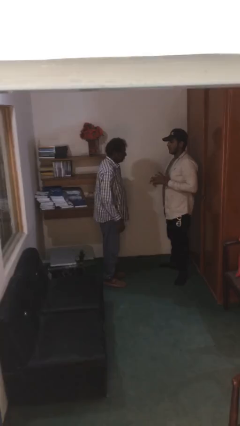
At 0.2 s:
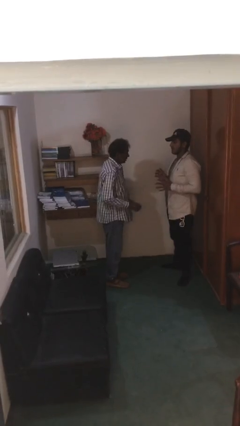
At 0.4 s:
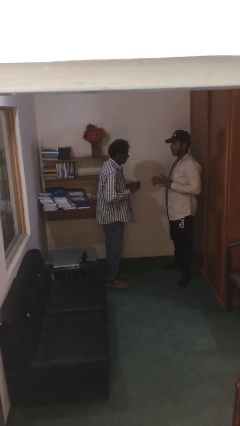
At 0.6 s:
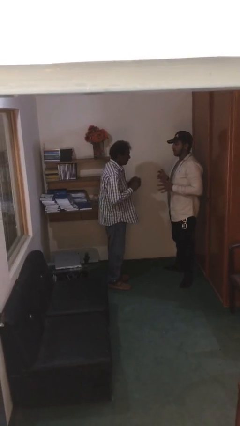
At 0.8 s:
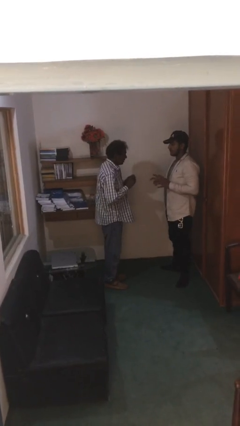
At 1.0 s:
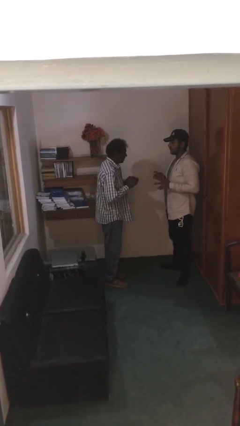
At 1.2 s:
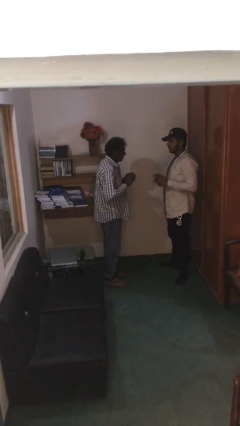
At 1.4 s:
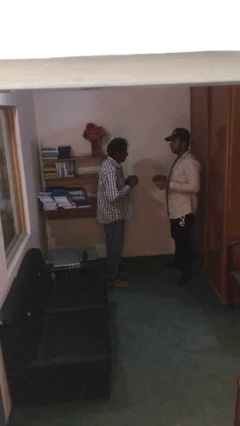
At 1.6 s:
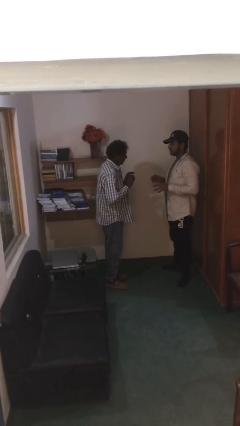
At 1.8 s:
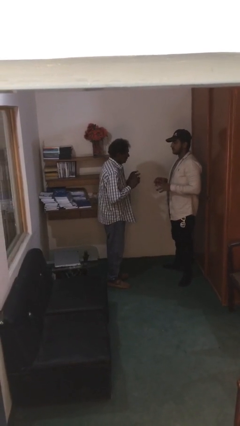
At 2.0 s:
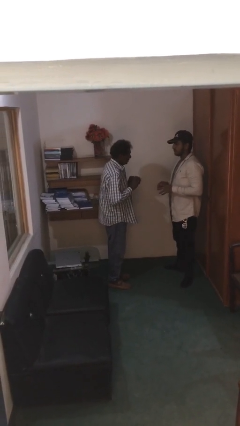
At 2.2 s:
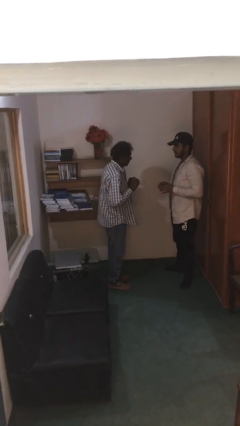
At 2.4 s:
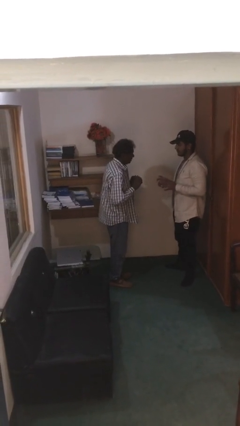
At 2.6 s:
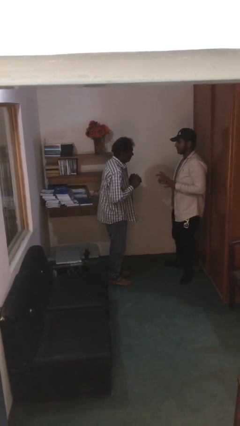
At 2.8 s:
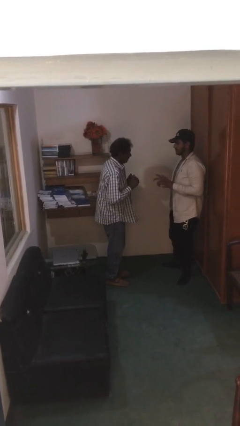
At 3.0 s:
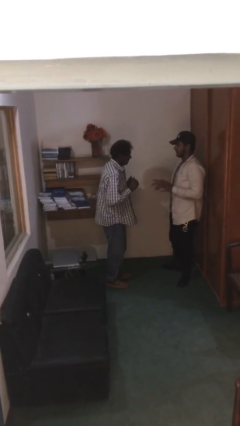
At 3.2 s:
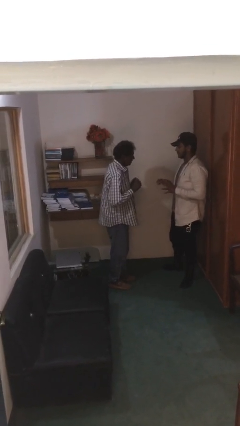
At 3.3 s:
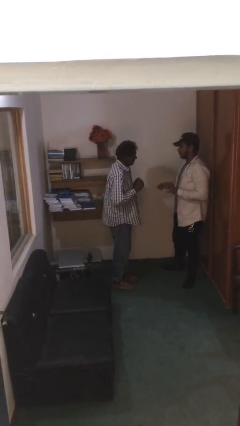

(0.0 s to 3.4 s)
person talks to person

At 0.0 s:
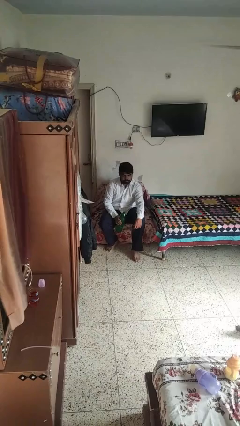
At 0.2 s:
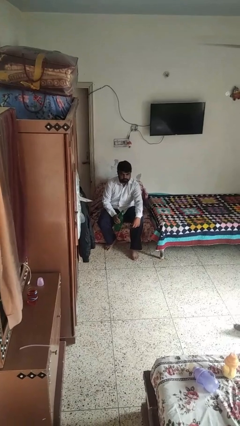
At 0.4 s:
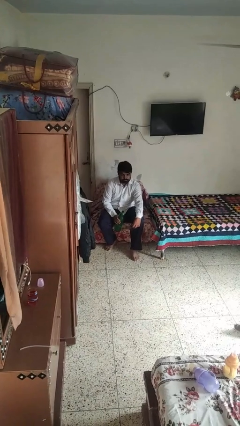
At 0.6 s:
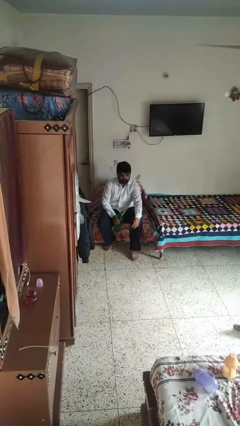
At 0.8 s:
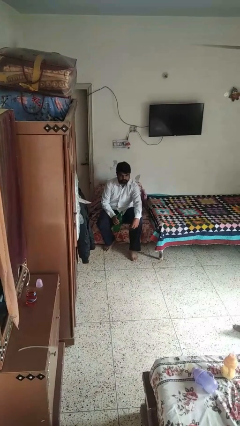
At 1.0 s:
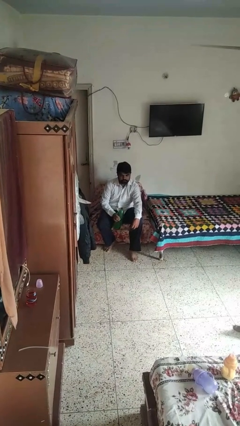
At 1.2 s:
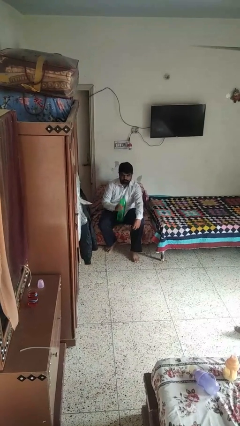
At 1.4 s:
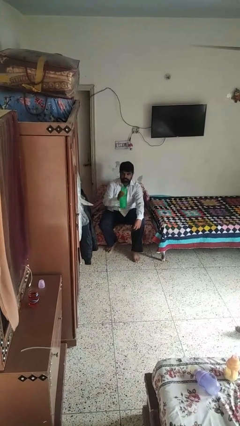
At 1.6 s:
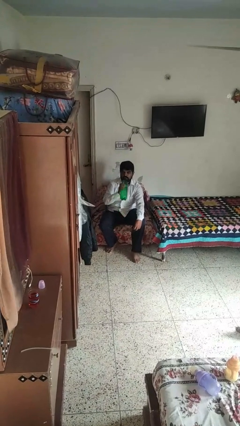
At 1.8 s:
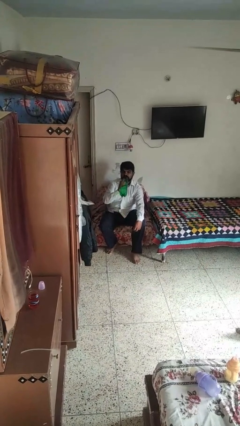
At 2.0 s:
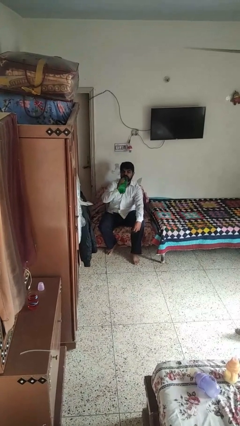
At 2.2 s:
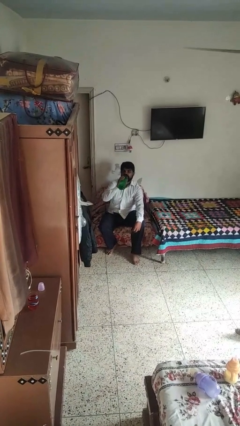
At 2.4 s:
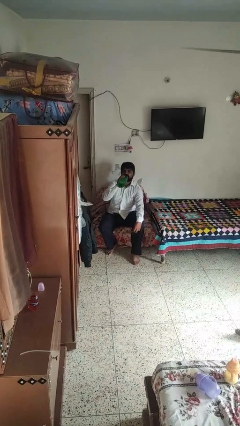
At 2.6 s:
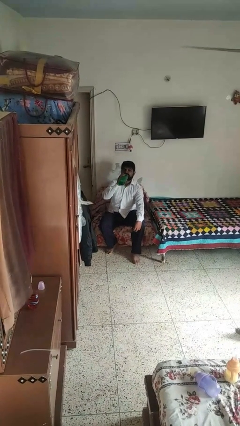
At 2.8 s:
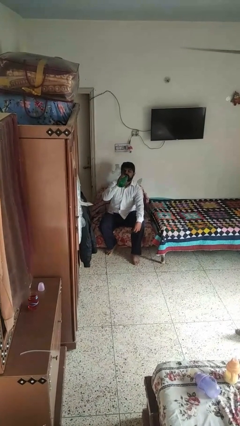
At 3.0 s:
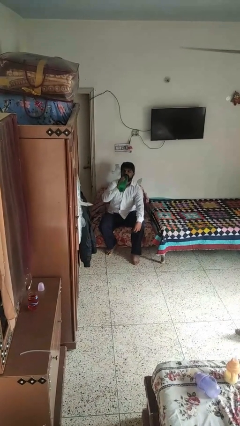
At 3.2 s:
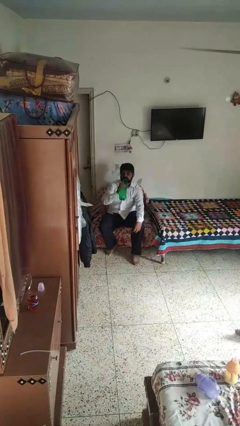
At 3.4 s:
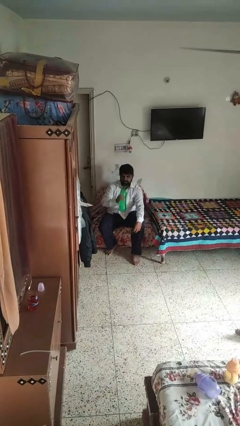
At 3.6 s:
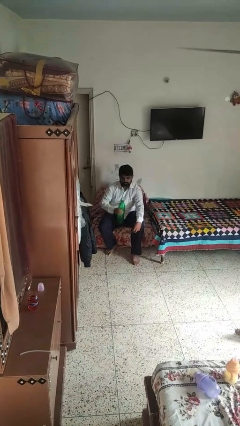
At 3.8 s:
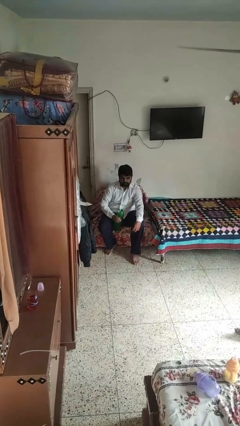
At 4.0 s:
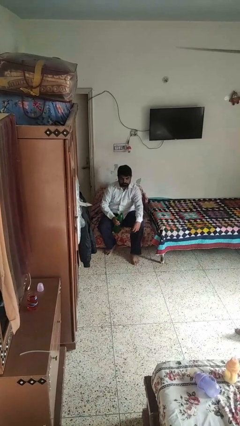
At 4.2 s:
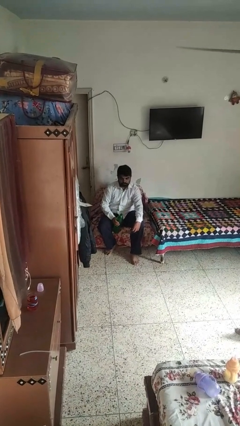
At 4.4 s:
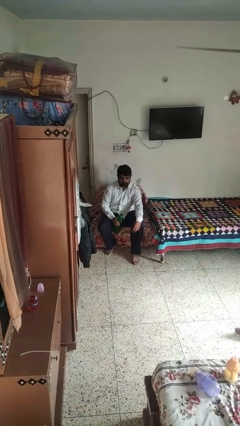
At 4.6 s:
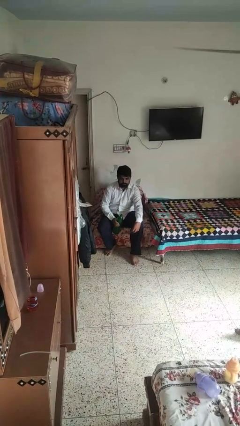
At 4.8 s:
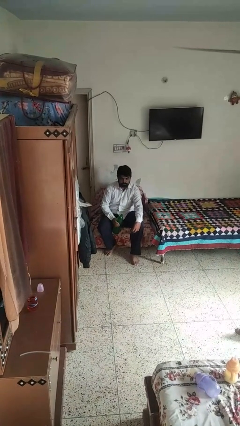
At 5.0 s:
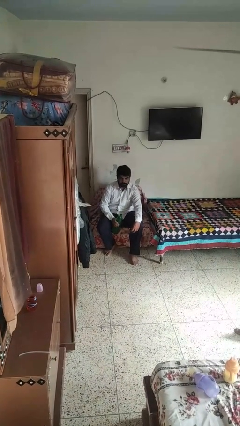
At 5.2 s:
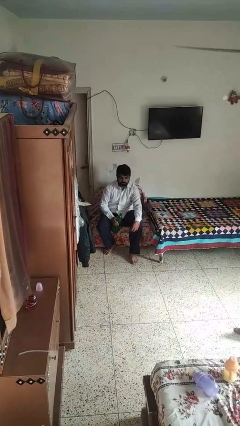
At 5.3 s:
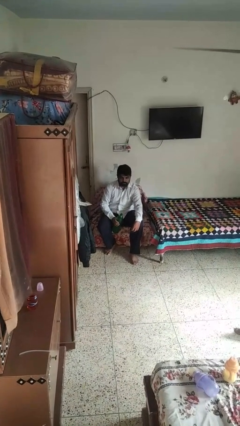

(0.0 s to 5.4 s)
person drinks from bottle

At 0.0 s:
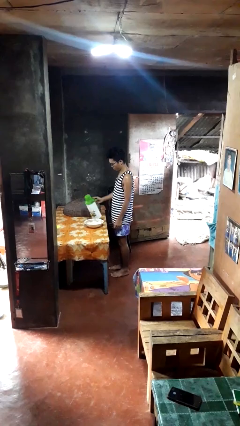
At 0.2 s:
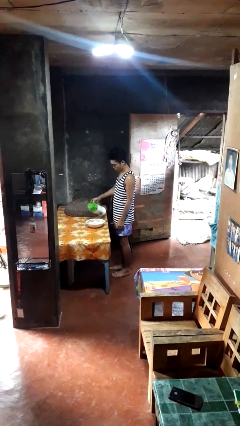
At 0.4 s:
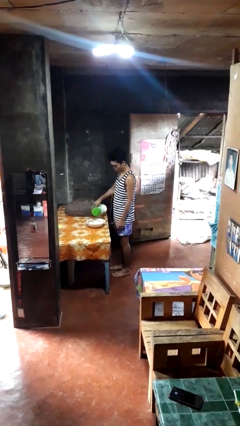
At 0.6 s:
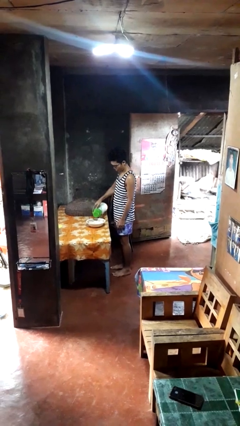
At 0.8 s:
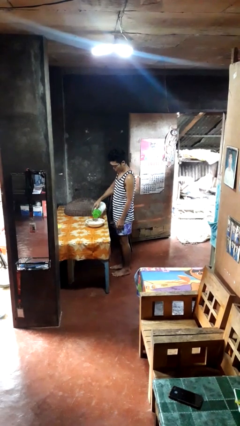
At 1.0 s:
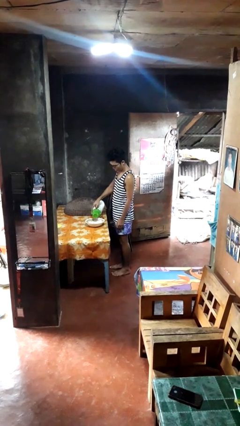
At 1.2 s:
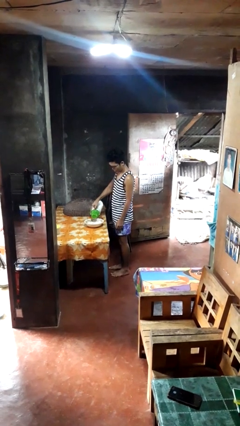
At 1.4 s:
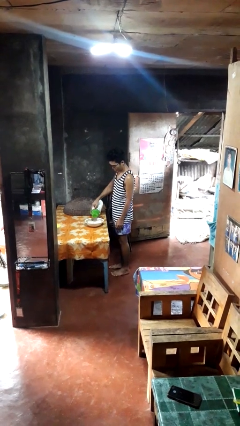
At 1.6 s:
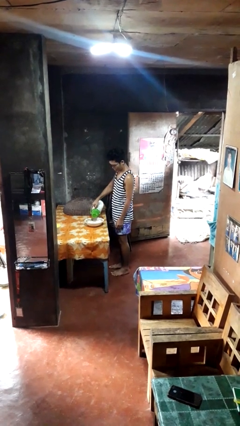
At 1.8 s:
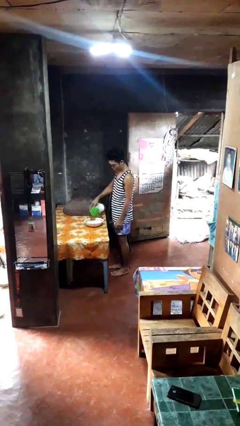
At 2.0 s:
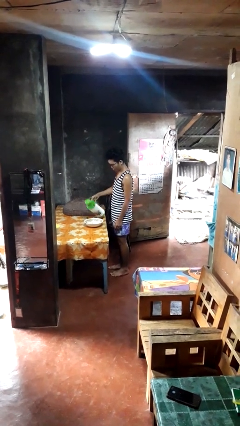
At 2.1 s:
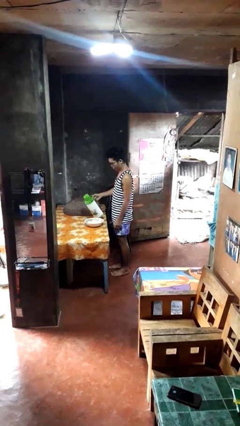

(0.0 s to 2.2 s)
person pours into bowl

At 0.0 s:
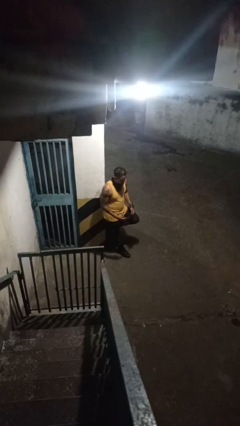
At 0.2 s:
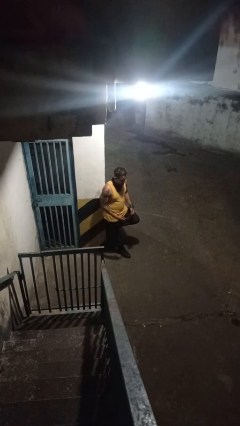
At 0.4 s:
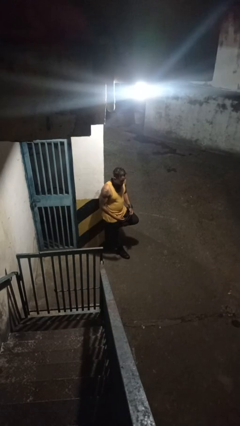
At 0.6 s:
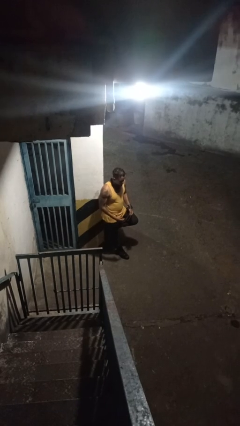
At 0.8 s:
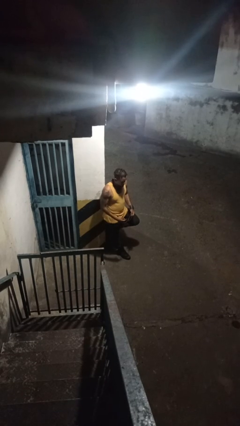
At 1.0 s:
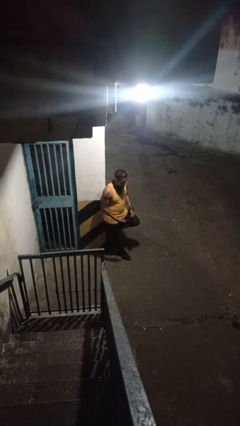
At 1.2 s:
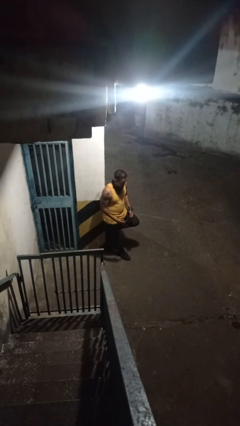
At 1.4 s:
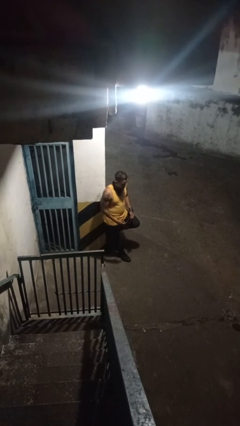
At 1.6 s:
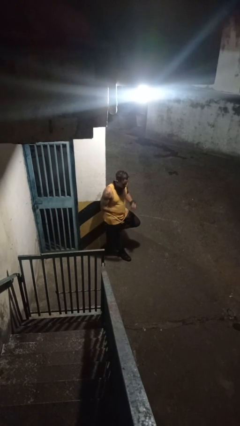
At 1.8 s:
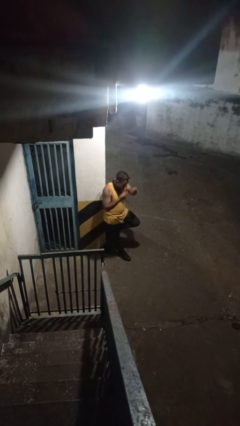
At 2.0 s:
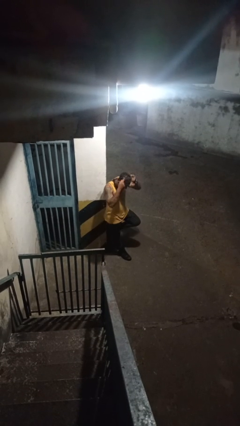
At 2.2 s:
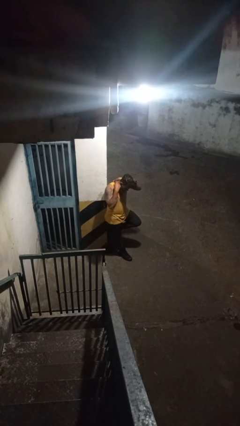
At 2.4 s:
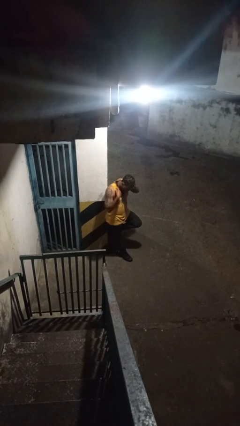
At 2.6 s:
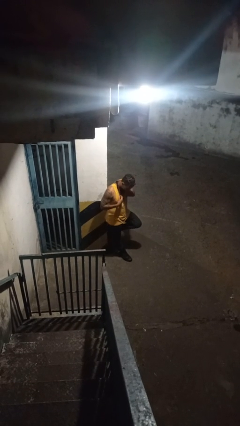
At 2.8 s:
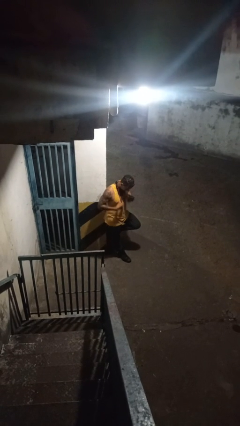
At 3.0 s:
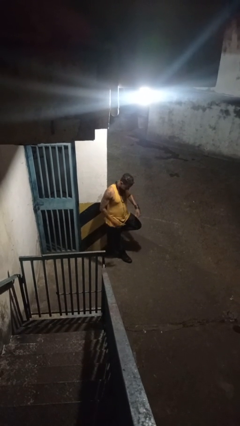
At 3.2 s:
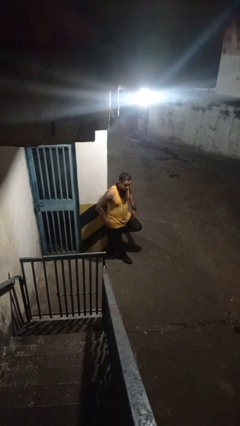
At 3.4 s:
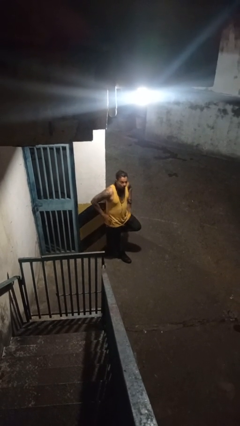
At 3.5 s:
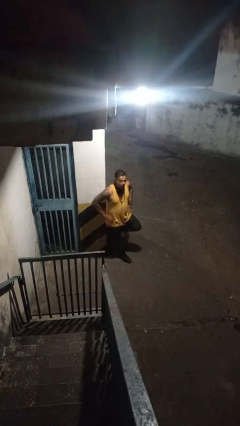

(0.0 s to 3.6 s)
person puts on necklace

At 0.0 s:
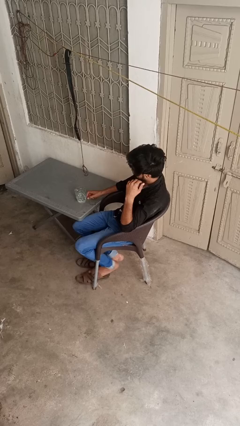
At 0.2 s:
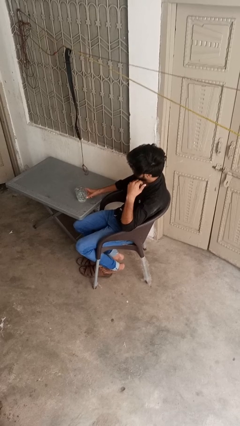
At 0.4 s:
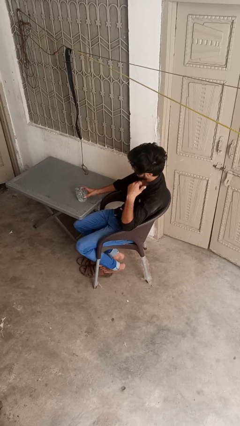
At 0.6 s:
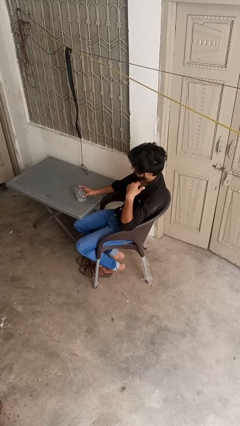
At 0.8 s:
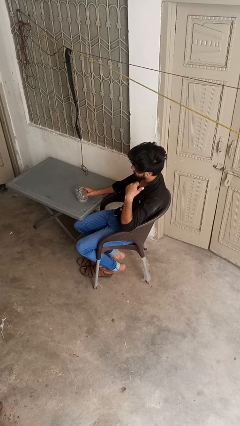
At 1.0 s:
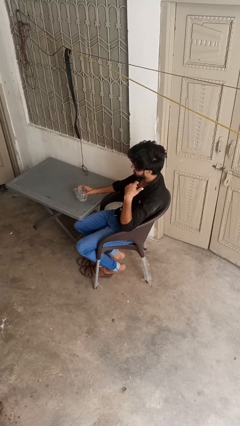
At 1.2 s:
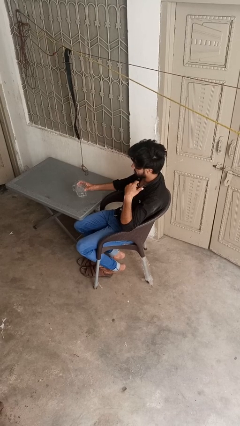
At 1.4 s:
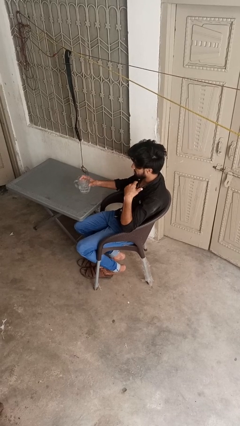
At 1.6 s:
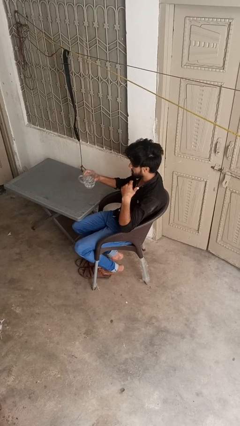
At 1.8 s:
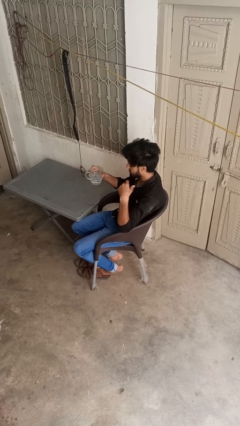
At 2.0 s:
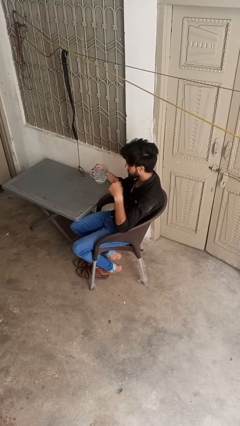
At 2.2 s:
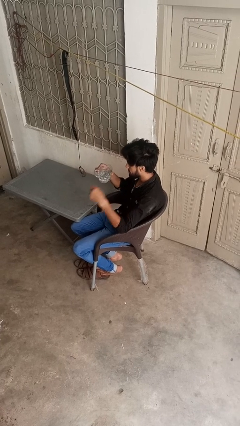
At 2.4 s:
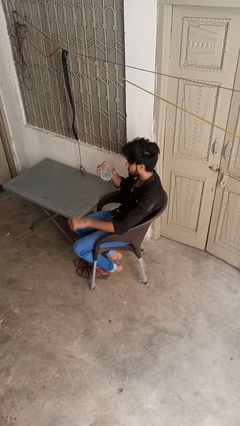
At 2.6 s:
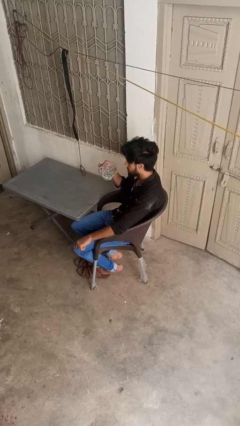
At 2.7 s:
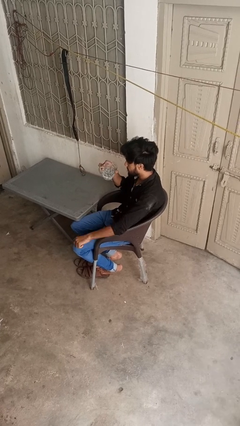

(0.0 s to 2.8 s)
person picks up object from table
